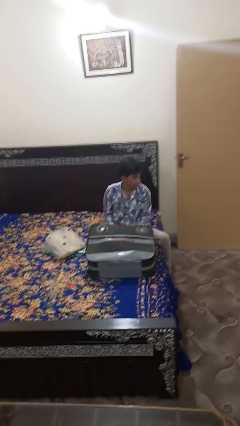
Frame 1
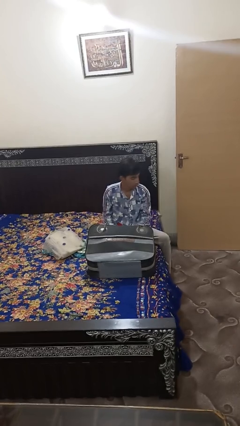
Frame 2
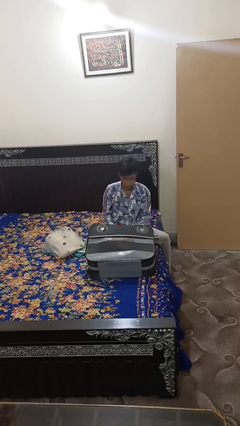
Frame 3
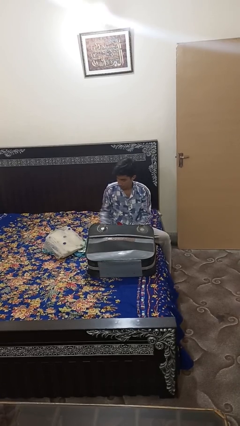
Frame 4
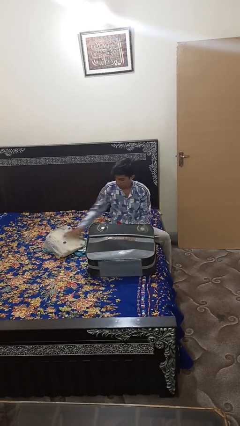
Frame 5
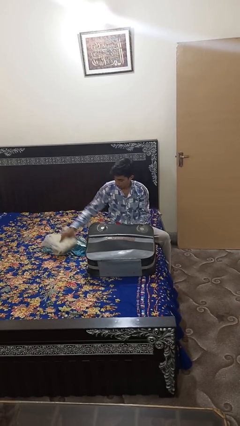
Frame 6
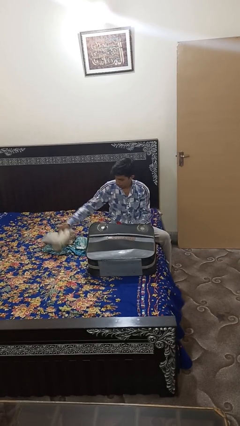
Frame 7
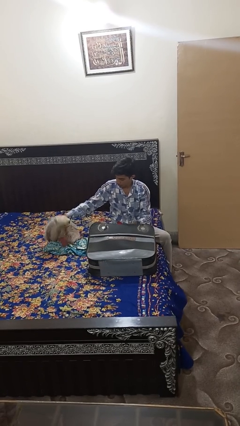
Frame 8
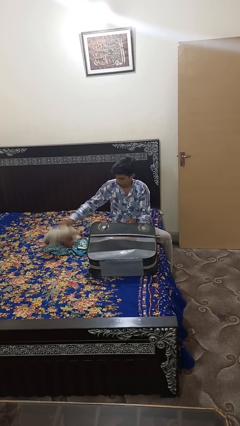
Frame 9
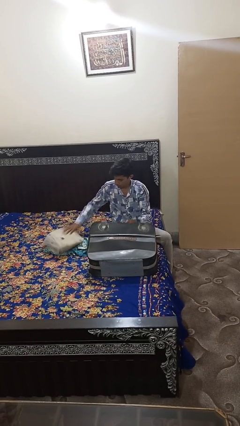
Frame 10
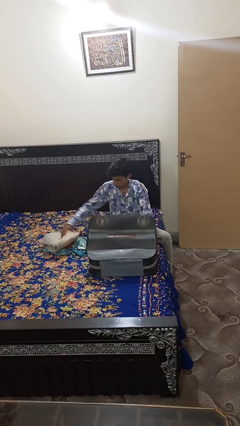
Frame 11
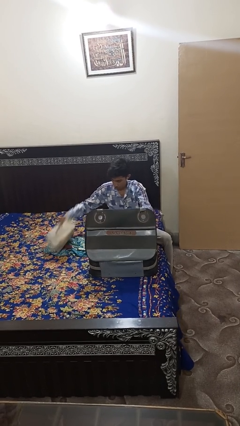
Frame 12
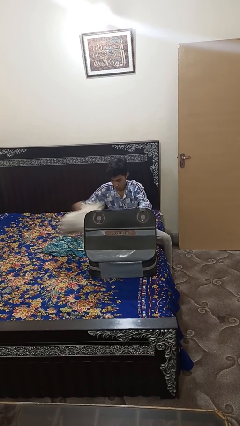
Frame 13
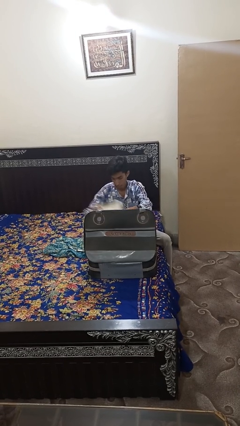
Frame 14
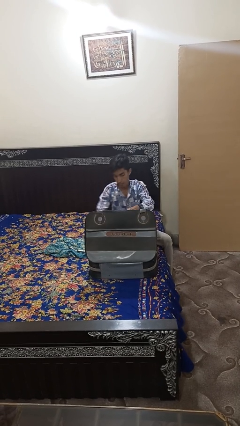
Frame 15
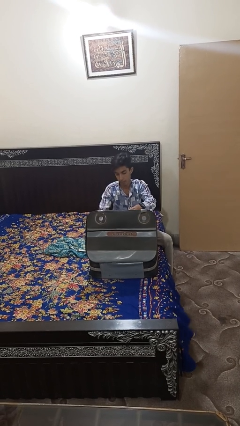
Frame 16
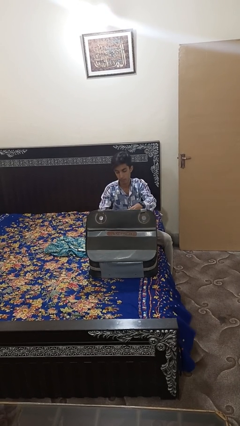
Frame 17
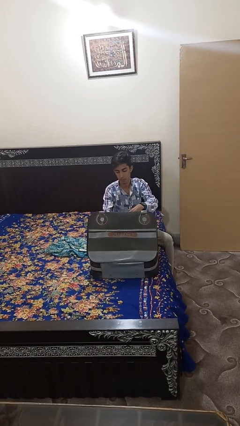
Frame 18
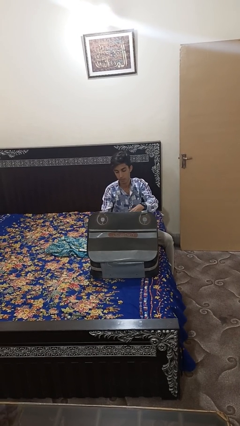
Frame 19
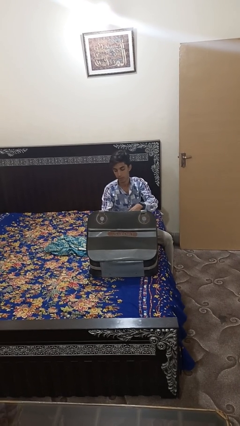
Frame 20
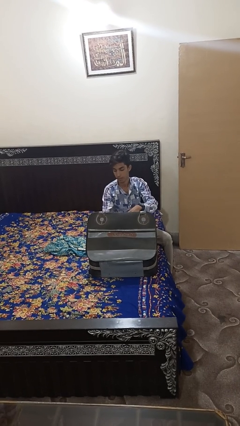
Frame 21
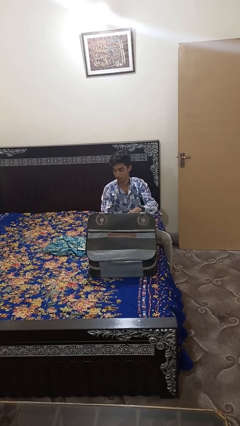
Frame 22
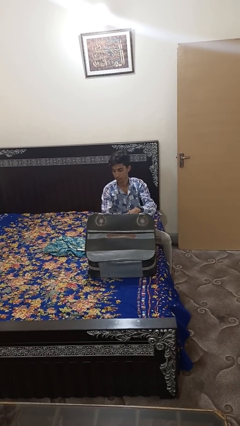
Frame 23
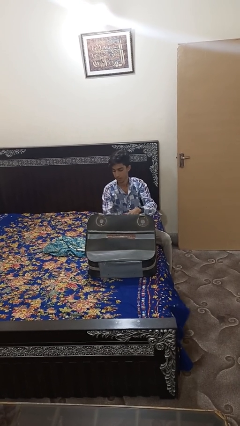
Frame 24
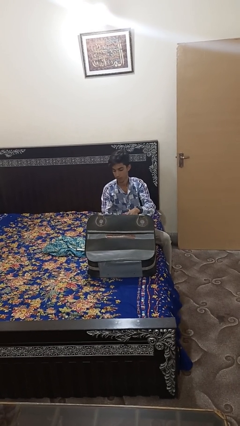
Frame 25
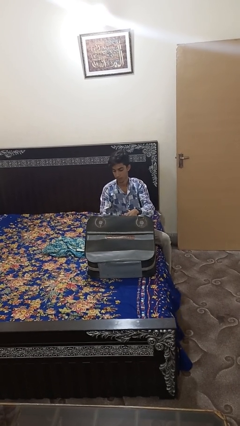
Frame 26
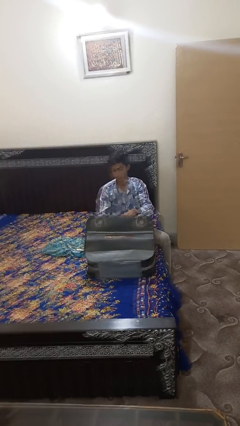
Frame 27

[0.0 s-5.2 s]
person loads clothes into suitcase

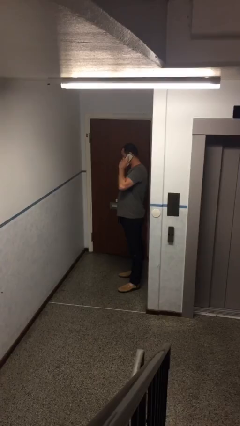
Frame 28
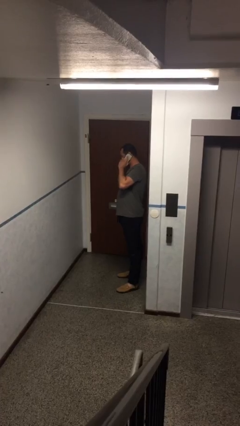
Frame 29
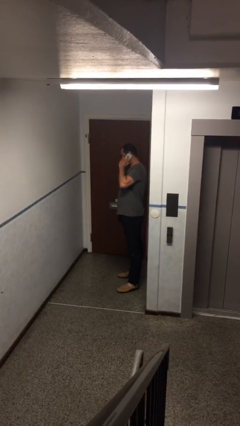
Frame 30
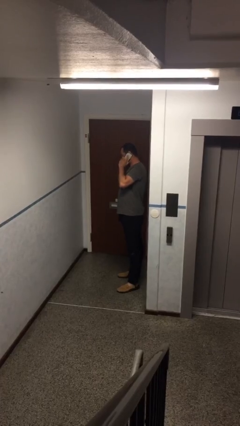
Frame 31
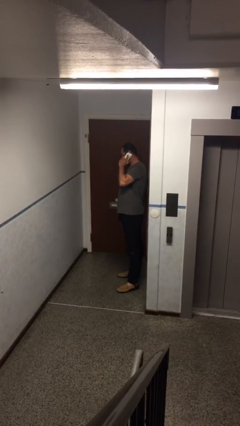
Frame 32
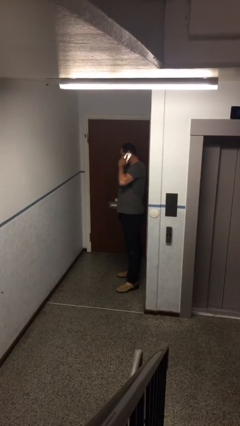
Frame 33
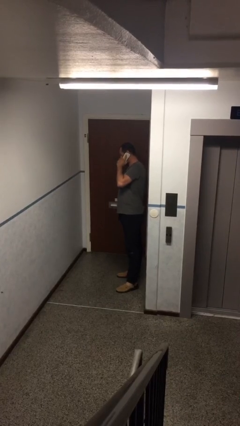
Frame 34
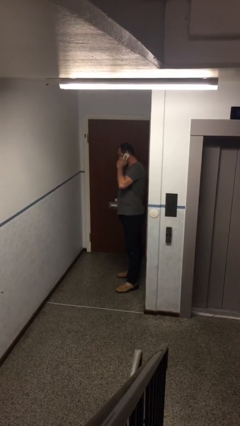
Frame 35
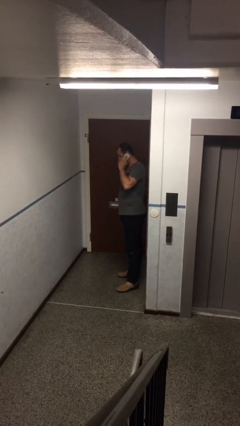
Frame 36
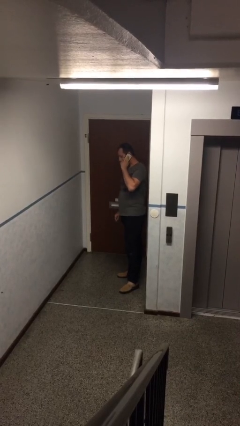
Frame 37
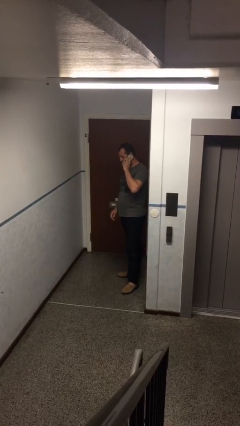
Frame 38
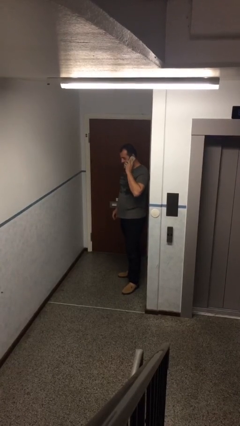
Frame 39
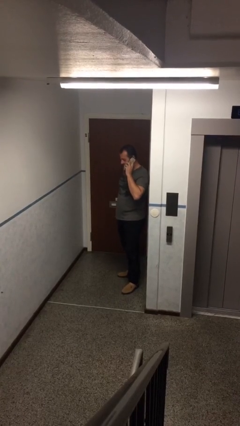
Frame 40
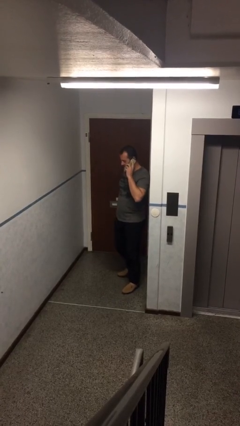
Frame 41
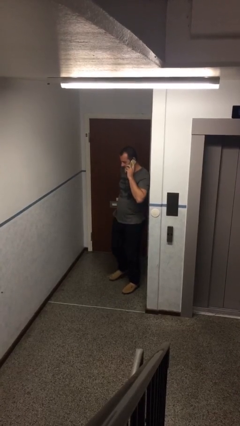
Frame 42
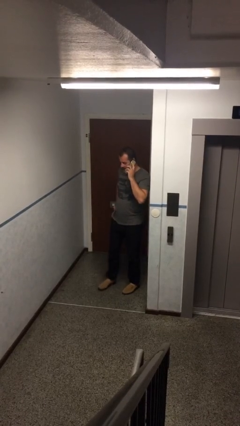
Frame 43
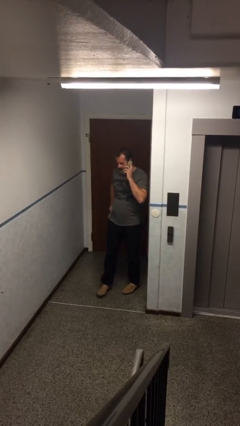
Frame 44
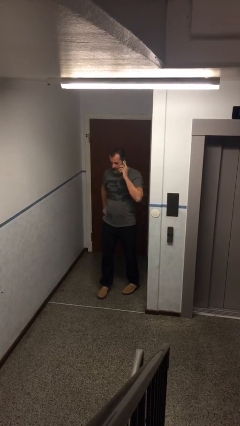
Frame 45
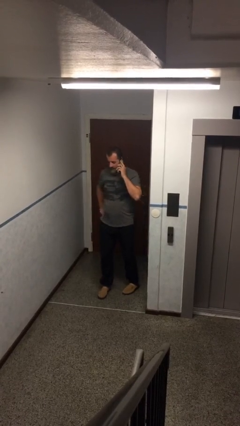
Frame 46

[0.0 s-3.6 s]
person closes facility door

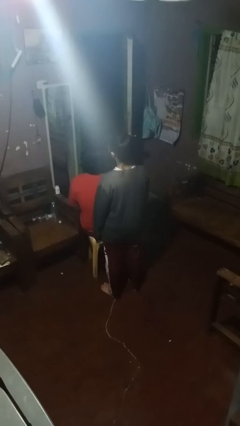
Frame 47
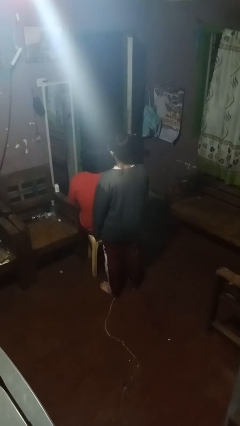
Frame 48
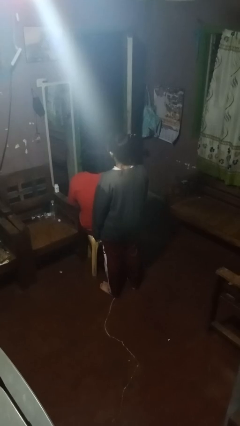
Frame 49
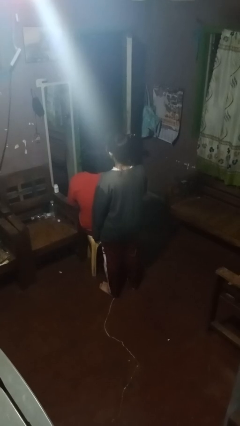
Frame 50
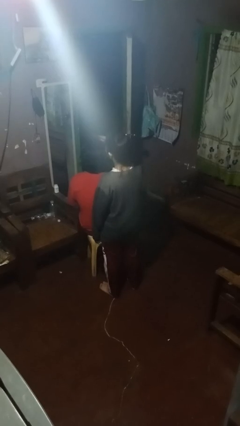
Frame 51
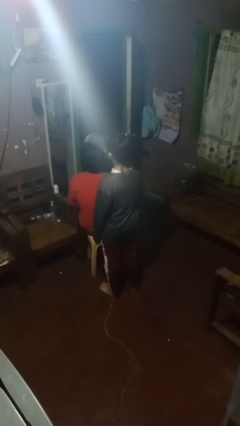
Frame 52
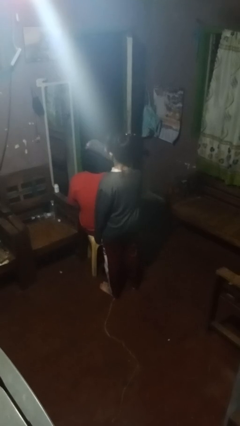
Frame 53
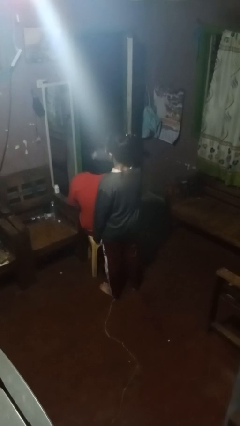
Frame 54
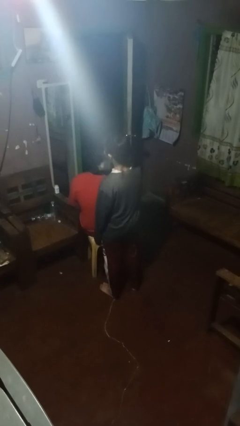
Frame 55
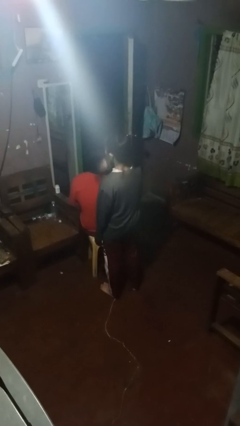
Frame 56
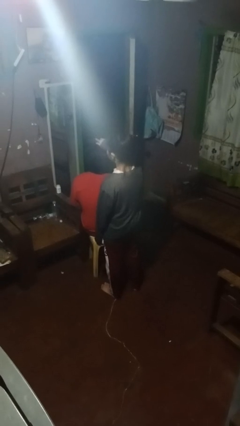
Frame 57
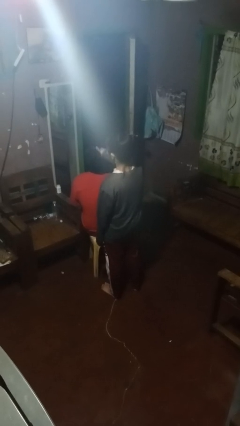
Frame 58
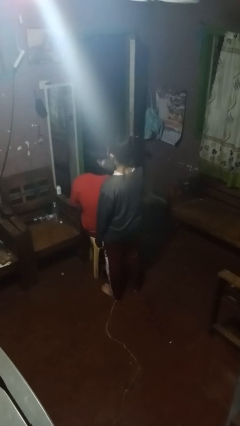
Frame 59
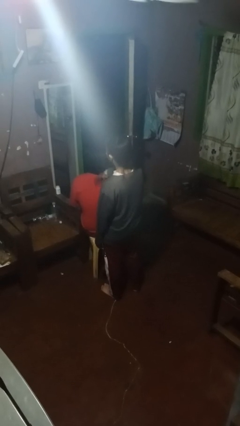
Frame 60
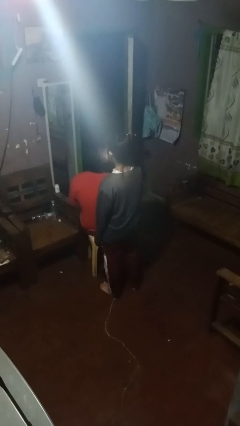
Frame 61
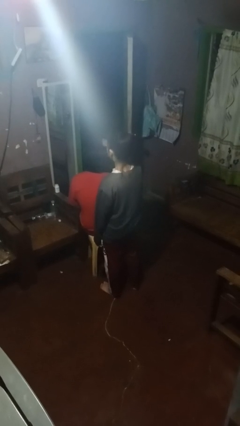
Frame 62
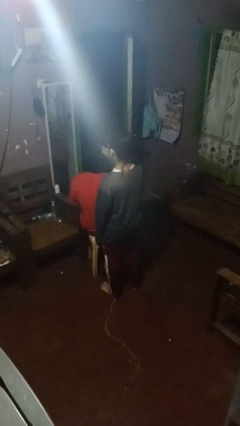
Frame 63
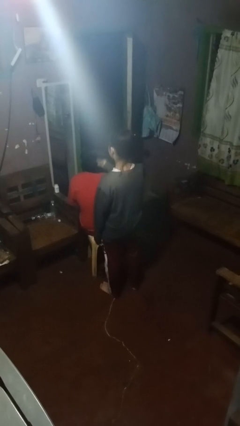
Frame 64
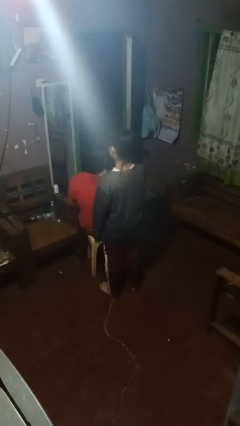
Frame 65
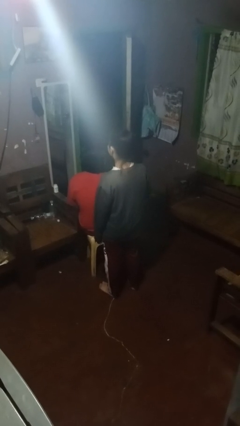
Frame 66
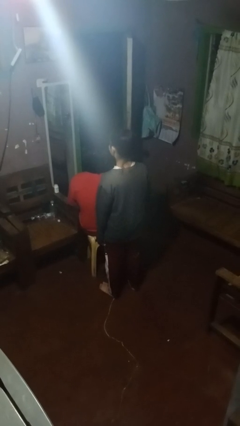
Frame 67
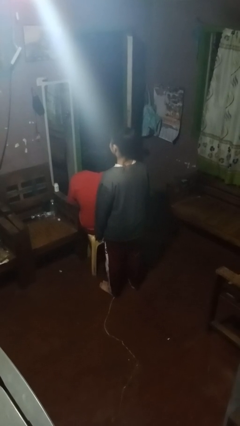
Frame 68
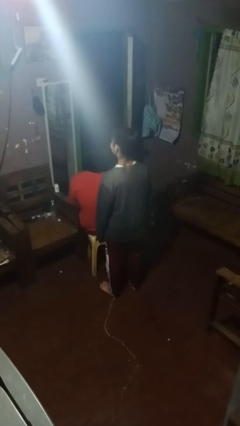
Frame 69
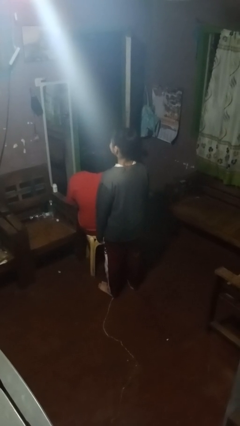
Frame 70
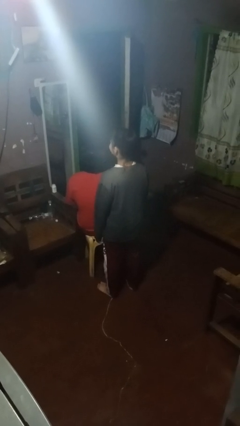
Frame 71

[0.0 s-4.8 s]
person brushes hair of person

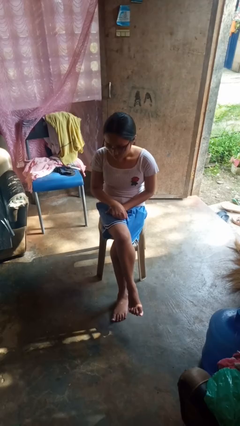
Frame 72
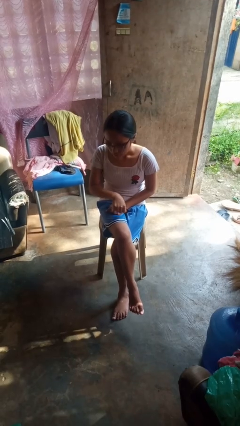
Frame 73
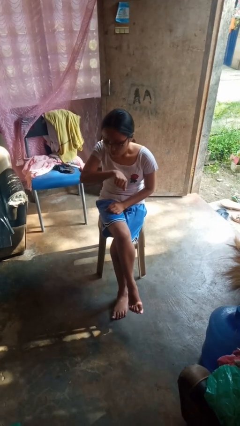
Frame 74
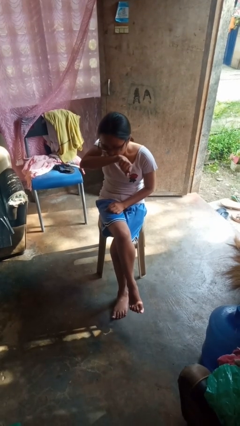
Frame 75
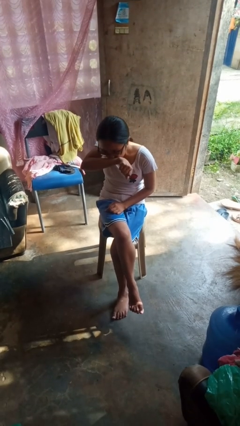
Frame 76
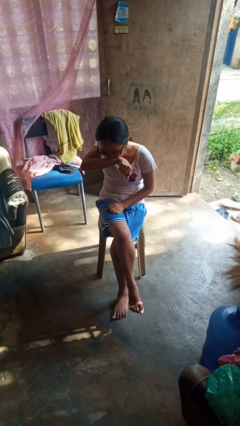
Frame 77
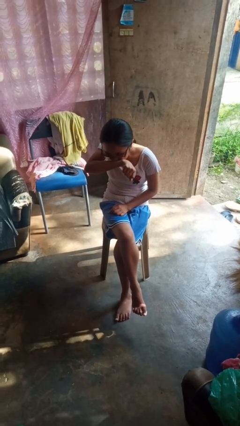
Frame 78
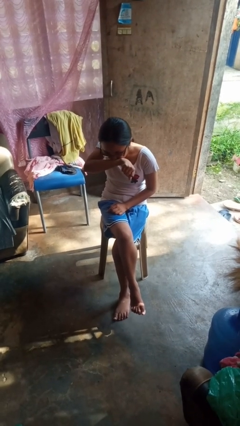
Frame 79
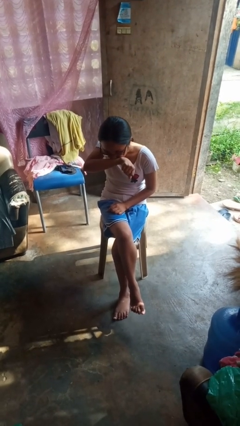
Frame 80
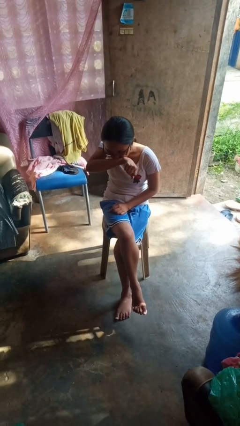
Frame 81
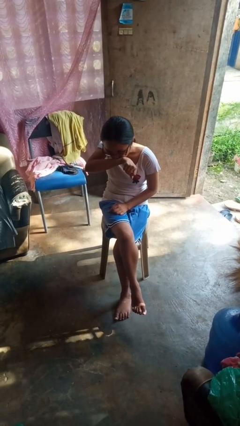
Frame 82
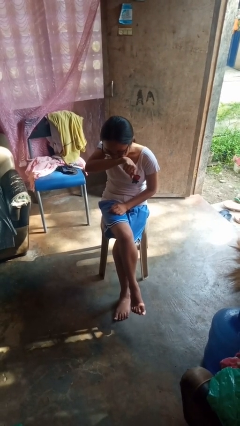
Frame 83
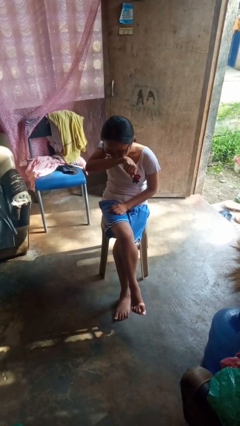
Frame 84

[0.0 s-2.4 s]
person sneezes into arm

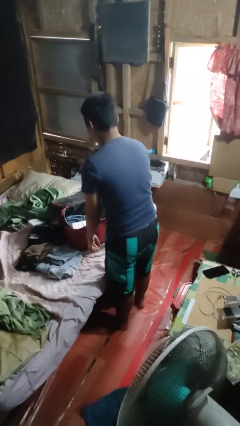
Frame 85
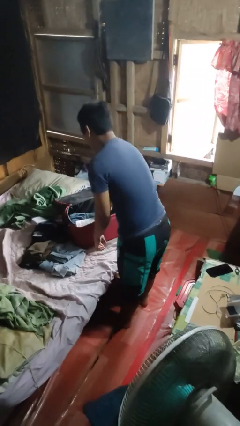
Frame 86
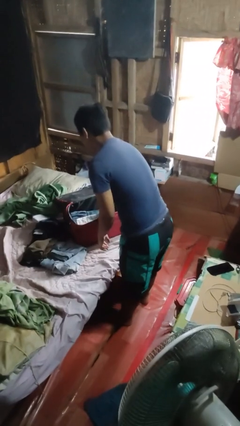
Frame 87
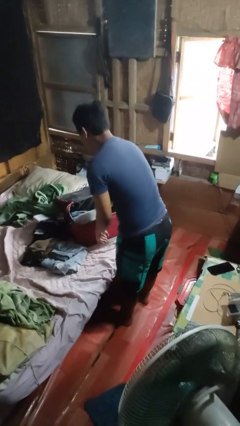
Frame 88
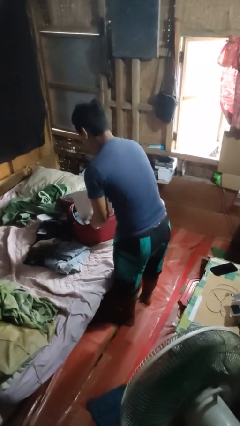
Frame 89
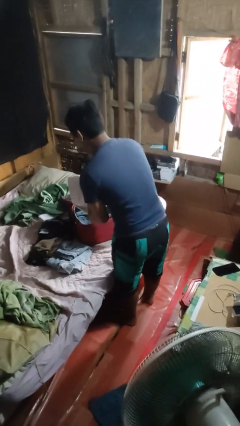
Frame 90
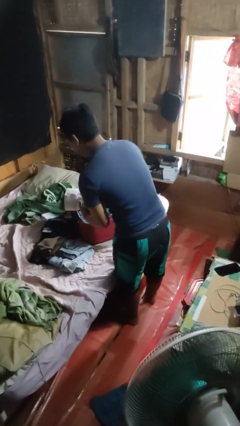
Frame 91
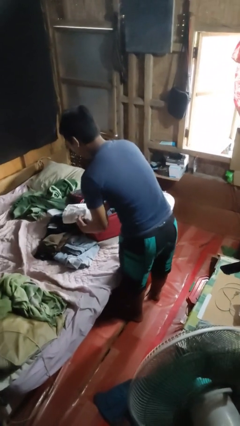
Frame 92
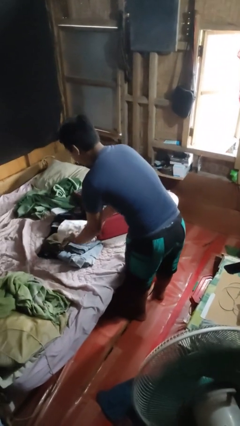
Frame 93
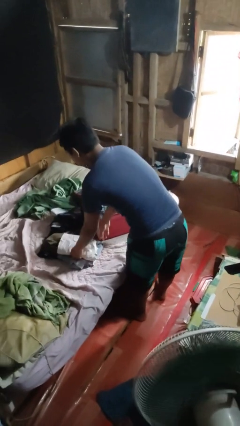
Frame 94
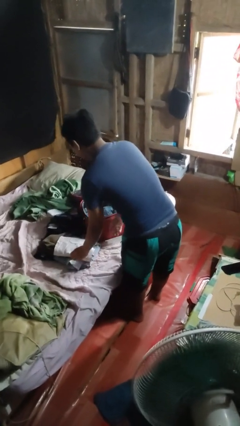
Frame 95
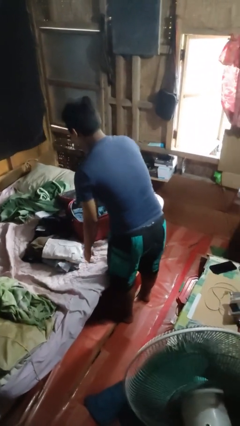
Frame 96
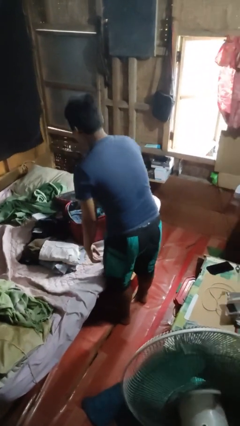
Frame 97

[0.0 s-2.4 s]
person unloads clothes from suitcase
